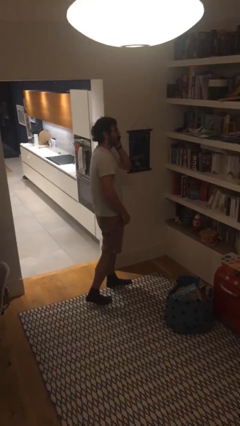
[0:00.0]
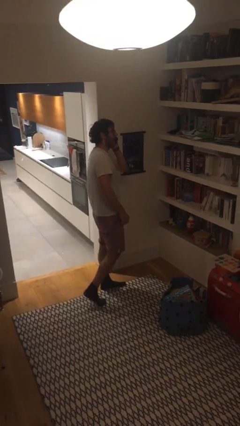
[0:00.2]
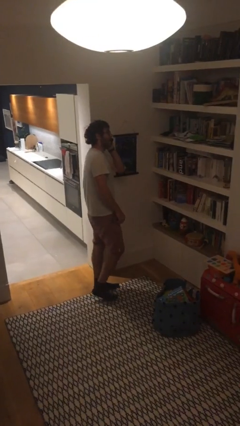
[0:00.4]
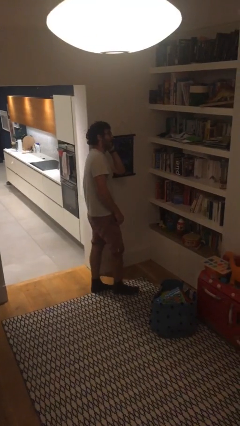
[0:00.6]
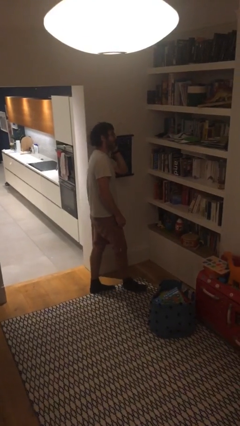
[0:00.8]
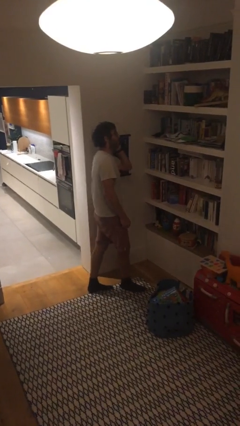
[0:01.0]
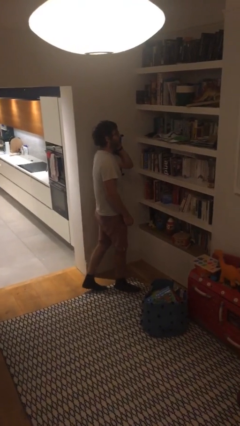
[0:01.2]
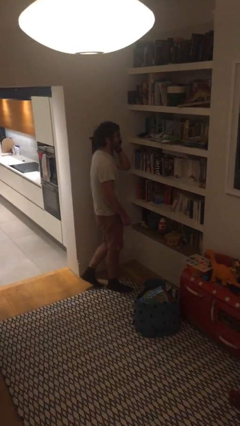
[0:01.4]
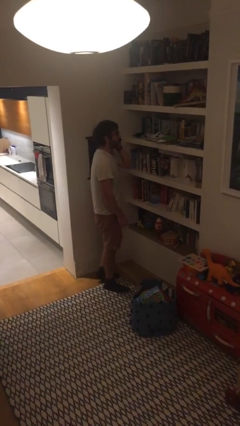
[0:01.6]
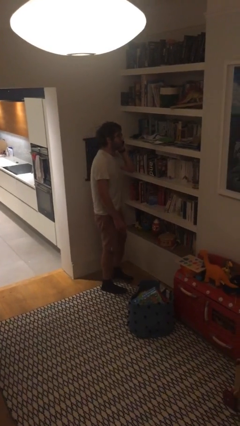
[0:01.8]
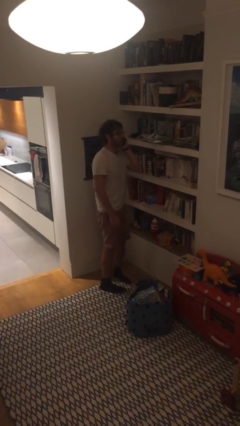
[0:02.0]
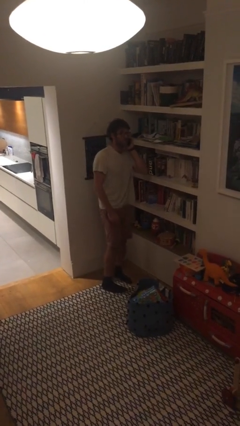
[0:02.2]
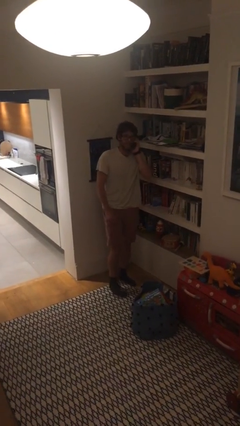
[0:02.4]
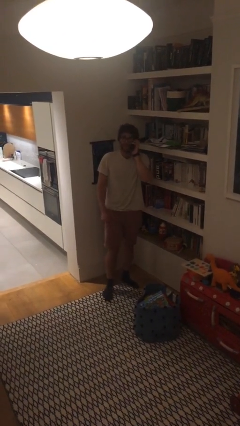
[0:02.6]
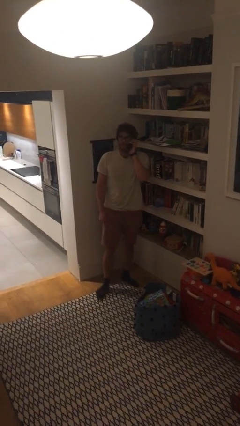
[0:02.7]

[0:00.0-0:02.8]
person talks on phone

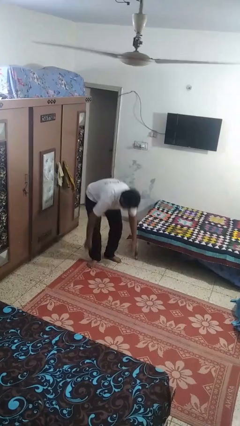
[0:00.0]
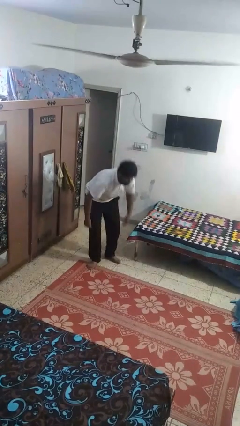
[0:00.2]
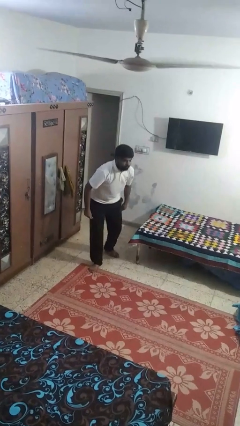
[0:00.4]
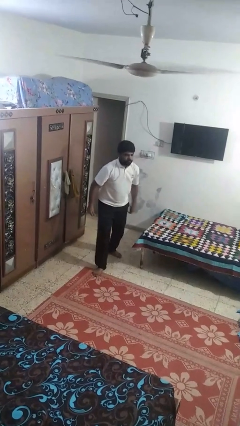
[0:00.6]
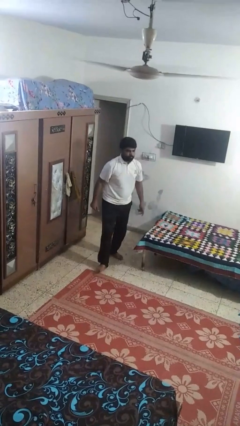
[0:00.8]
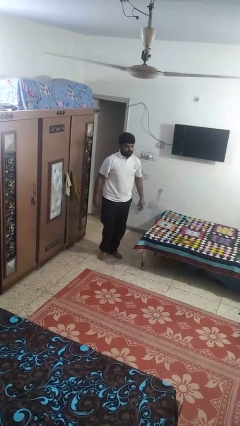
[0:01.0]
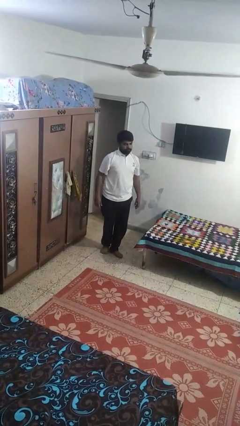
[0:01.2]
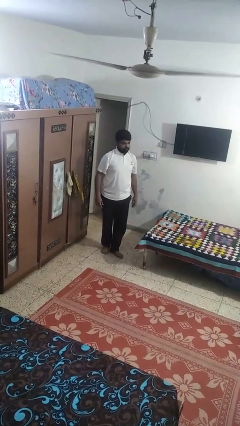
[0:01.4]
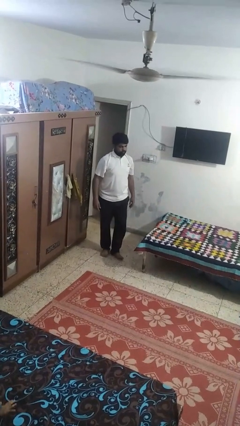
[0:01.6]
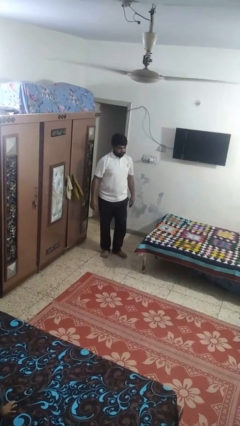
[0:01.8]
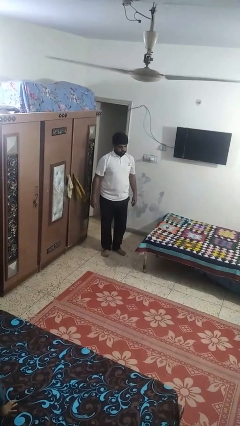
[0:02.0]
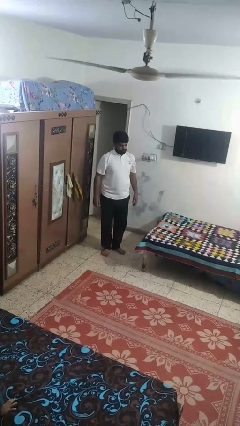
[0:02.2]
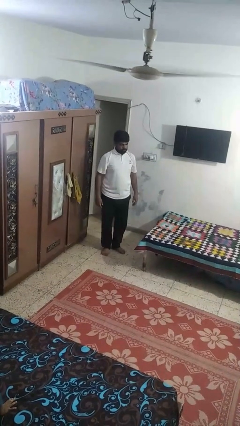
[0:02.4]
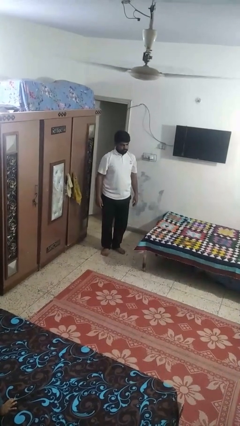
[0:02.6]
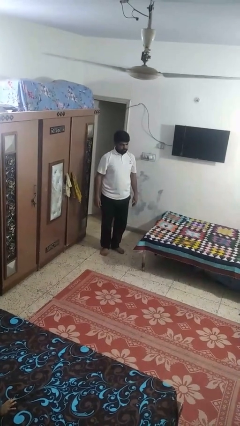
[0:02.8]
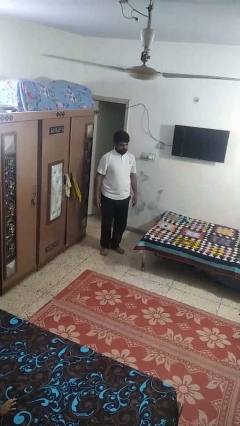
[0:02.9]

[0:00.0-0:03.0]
person stands up from floor

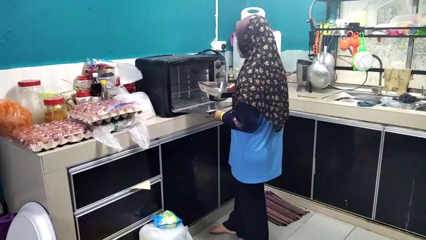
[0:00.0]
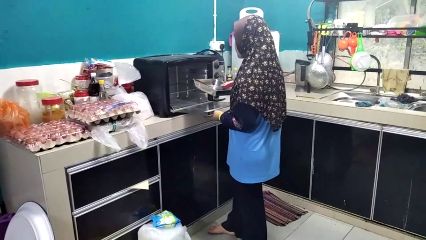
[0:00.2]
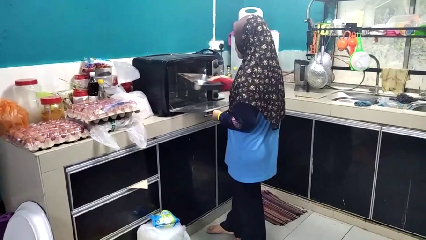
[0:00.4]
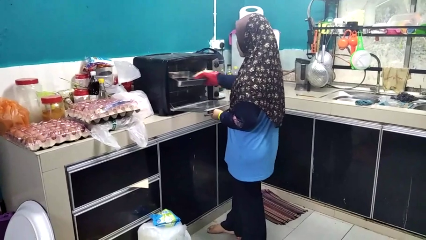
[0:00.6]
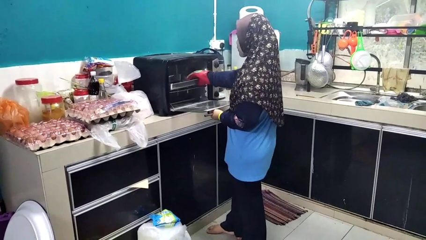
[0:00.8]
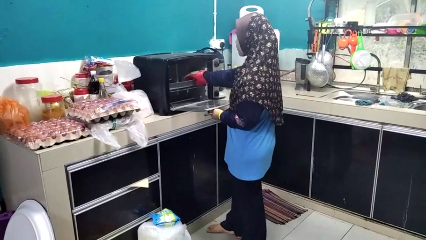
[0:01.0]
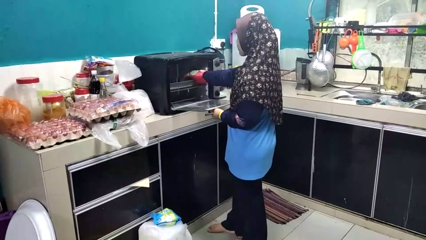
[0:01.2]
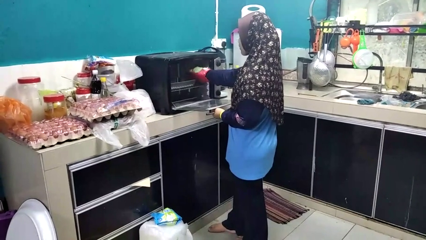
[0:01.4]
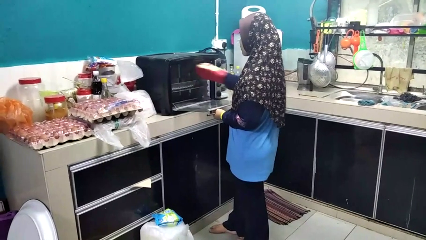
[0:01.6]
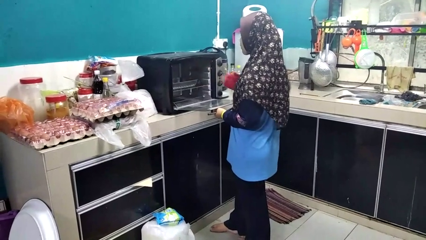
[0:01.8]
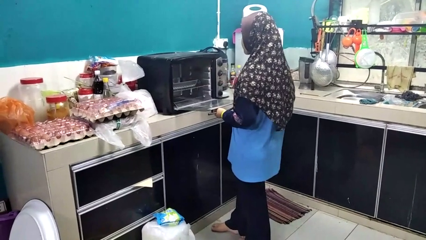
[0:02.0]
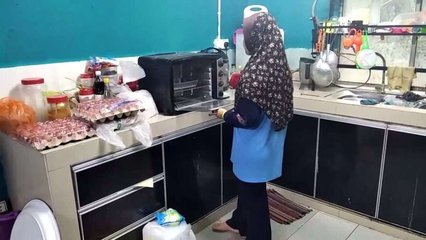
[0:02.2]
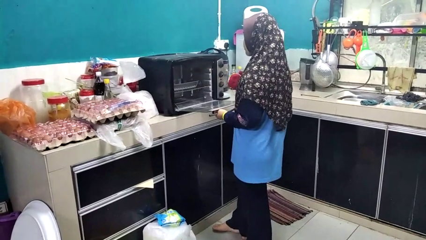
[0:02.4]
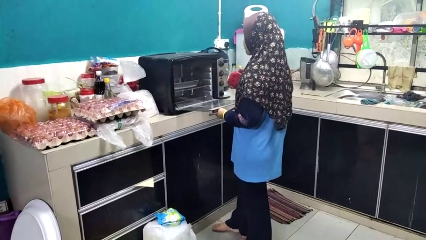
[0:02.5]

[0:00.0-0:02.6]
person puts object into oven

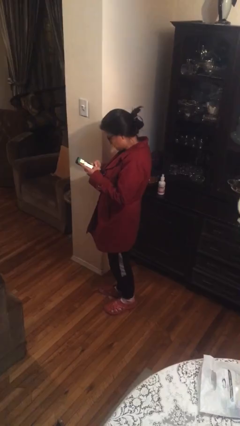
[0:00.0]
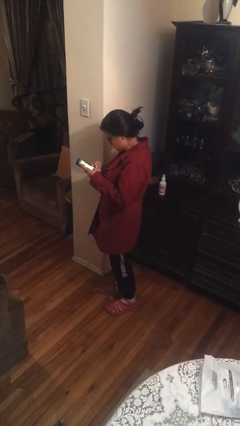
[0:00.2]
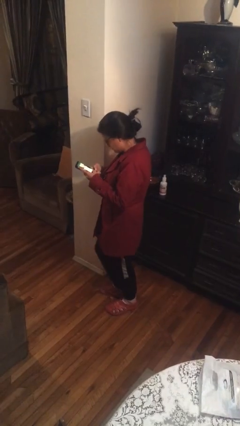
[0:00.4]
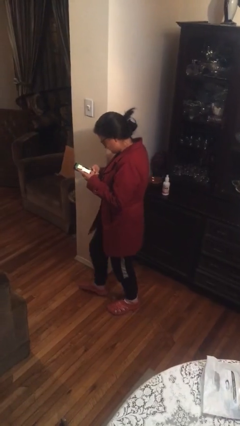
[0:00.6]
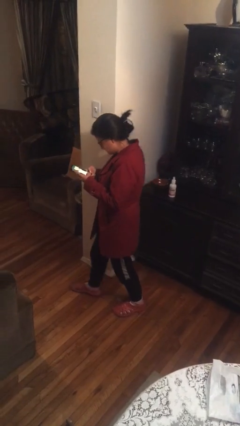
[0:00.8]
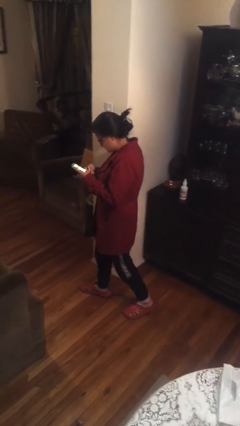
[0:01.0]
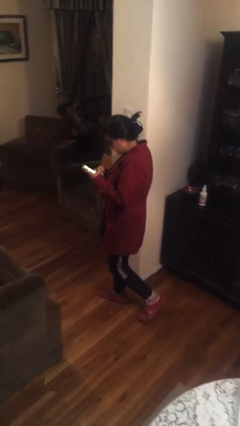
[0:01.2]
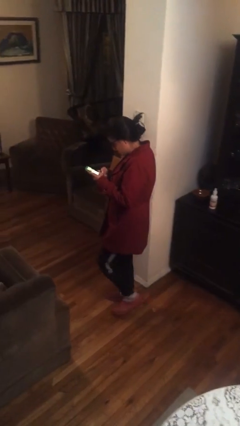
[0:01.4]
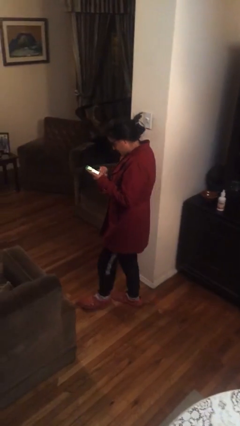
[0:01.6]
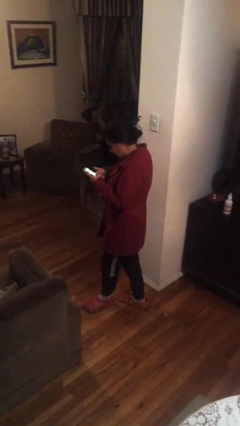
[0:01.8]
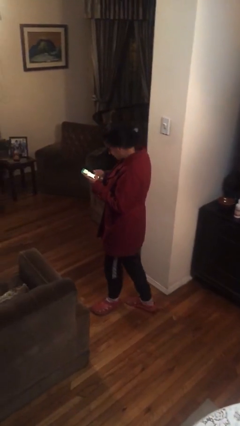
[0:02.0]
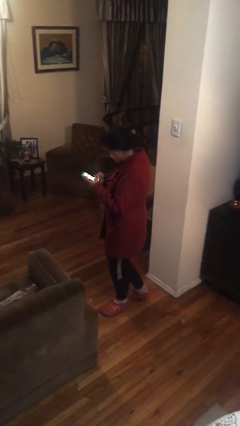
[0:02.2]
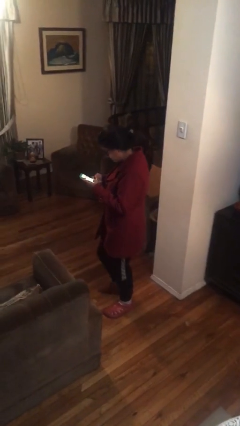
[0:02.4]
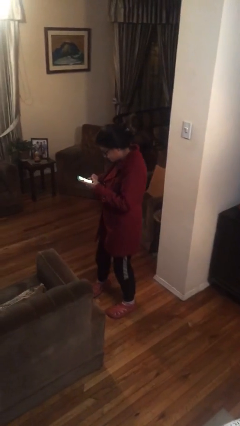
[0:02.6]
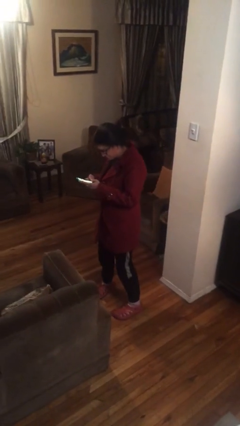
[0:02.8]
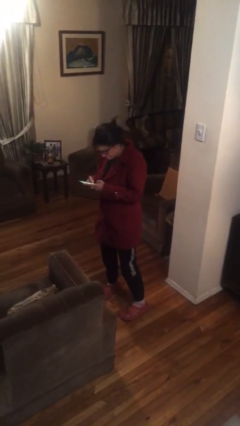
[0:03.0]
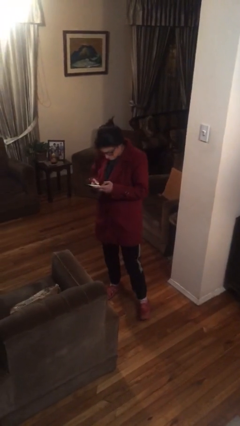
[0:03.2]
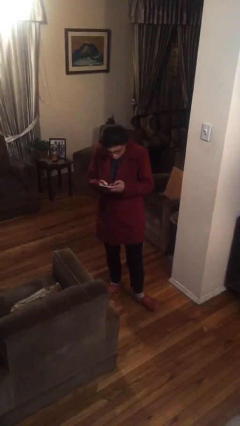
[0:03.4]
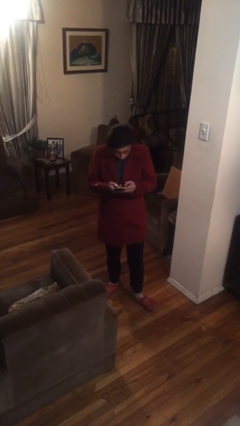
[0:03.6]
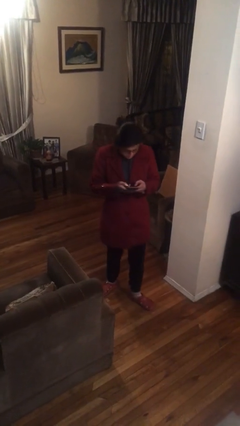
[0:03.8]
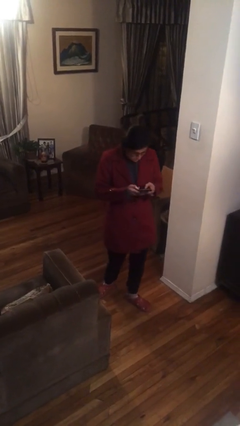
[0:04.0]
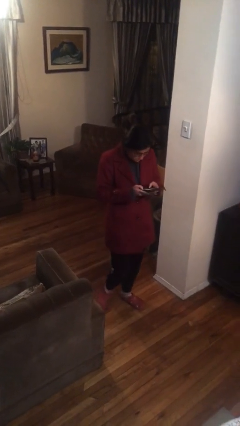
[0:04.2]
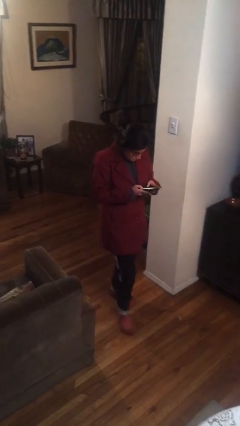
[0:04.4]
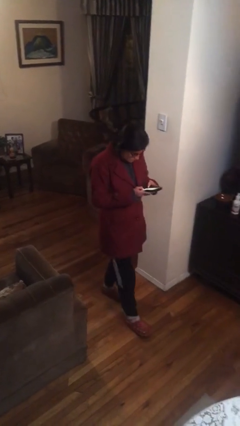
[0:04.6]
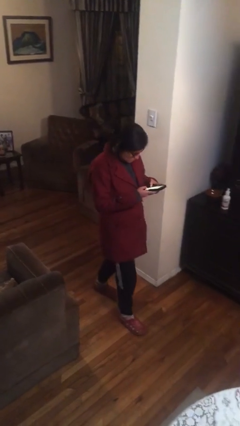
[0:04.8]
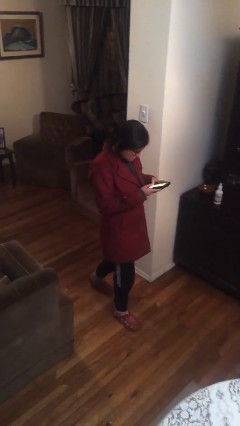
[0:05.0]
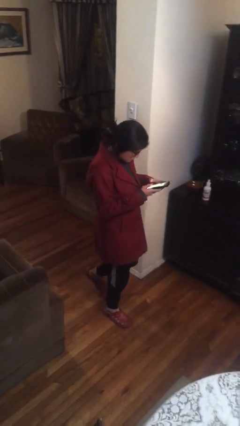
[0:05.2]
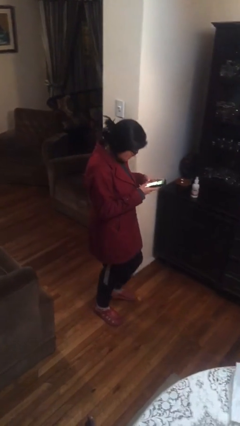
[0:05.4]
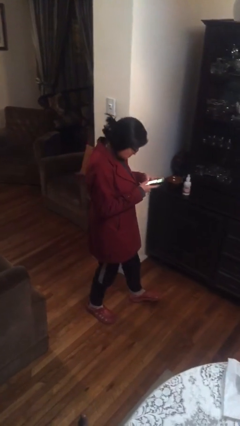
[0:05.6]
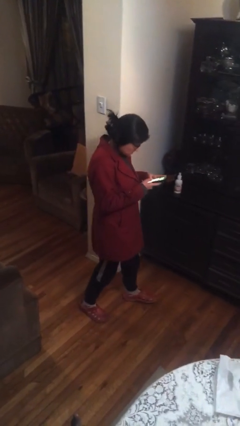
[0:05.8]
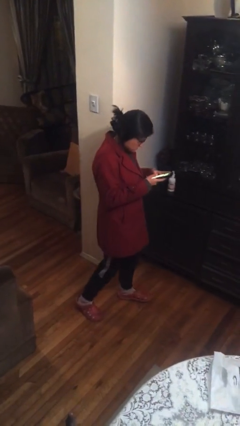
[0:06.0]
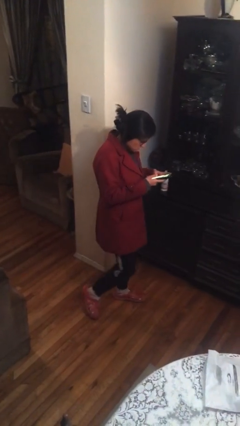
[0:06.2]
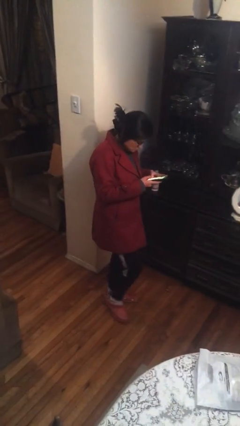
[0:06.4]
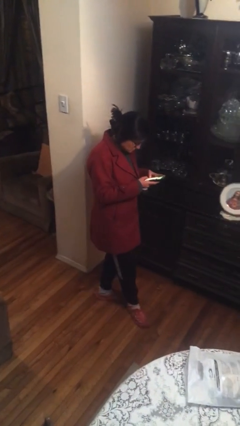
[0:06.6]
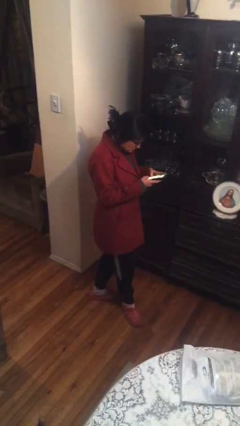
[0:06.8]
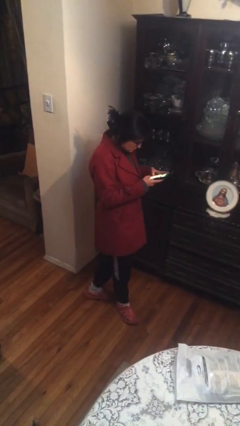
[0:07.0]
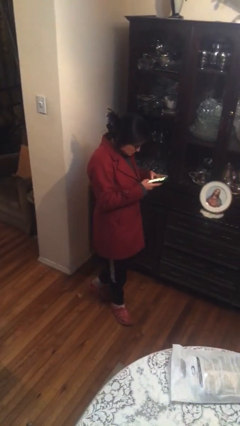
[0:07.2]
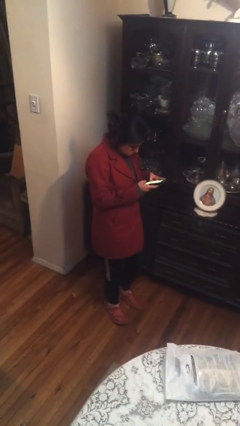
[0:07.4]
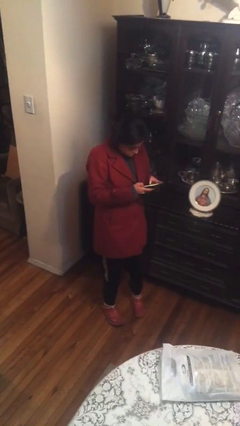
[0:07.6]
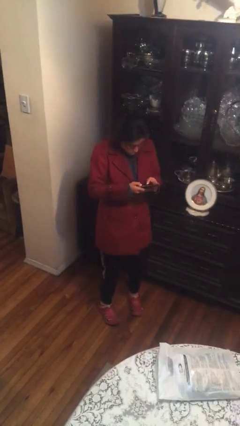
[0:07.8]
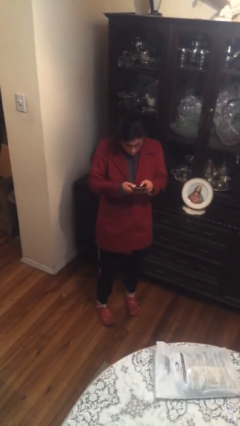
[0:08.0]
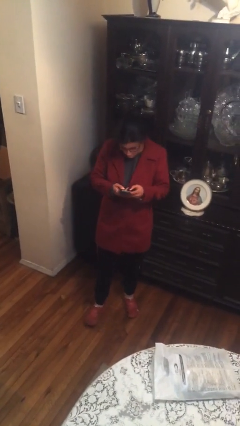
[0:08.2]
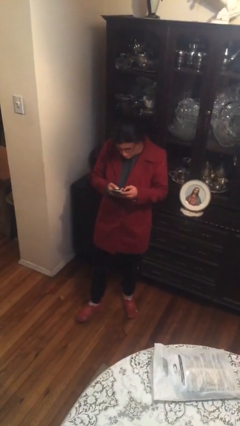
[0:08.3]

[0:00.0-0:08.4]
person texts on phone

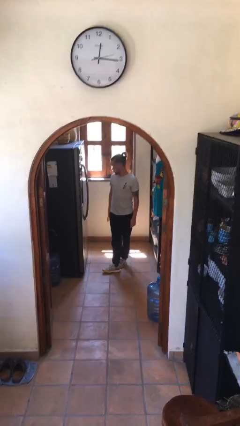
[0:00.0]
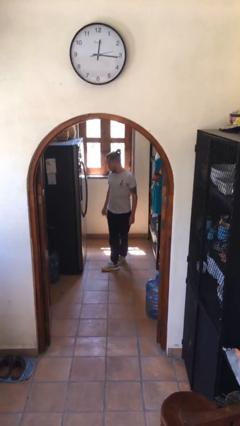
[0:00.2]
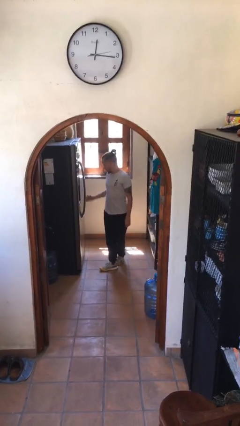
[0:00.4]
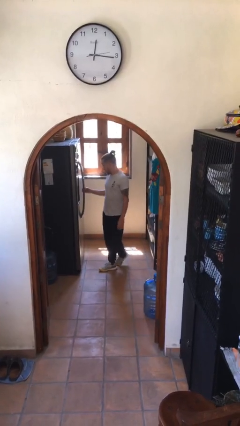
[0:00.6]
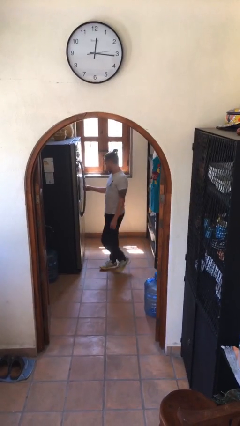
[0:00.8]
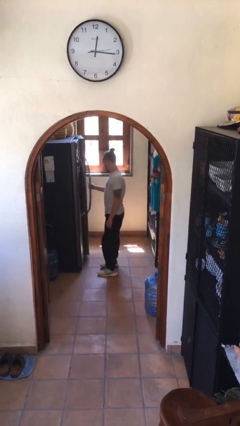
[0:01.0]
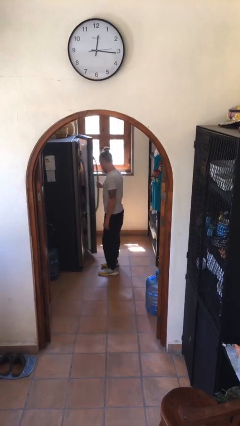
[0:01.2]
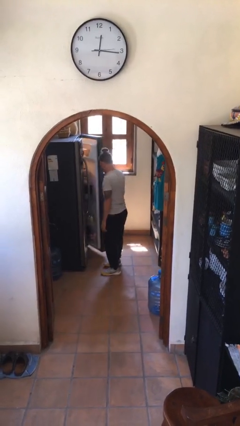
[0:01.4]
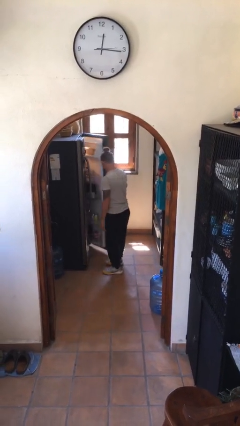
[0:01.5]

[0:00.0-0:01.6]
person opens refrigerator
